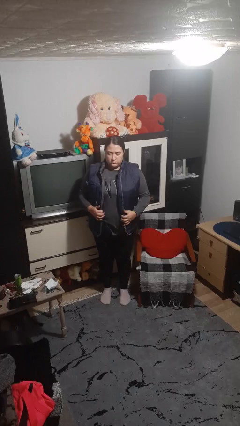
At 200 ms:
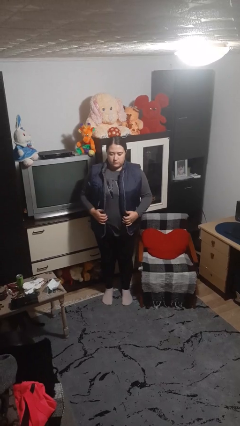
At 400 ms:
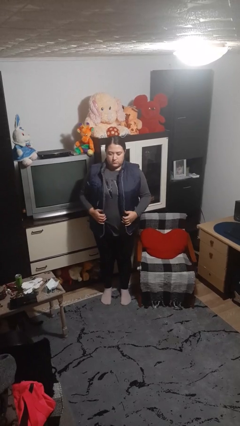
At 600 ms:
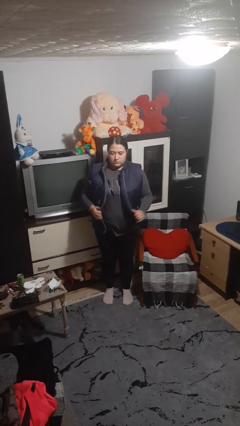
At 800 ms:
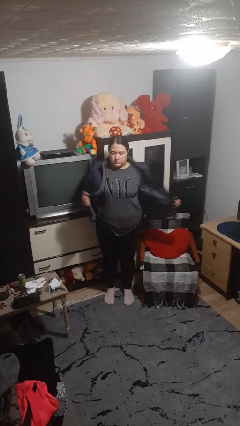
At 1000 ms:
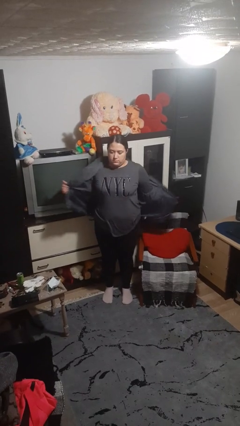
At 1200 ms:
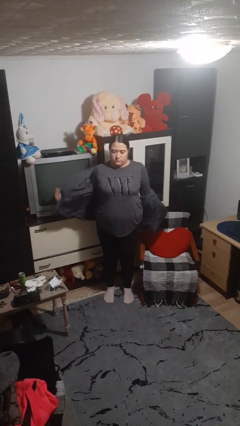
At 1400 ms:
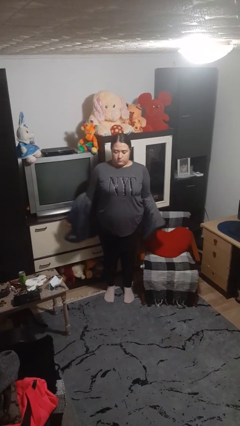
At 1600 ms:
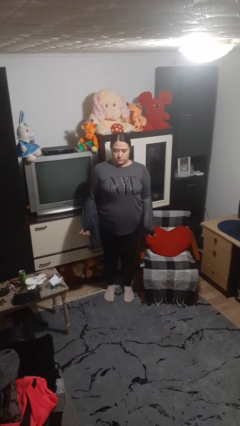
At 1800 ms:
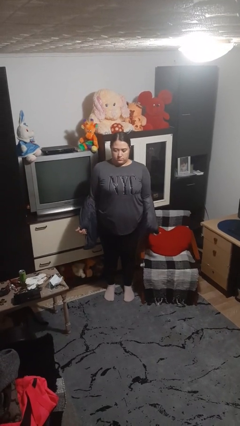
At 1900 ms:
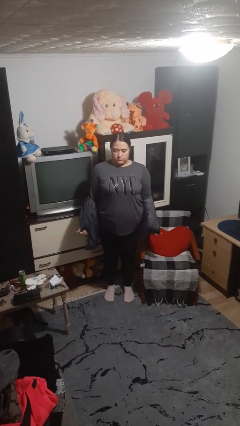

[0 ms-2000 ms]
person takes off jacket

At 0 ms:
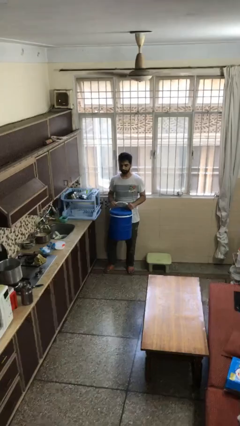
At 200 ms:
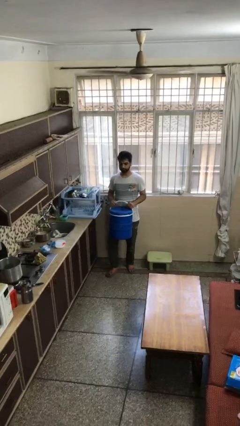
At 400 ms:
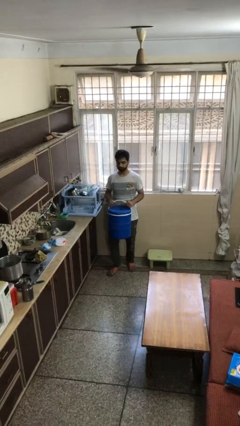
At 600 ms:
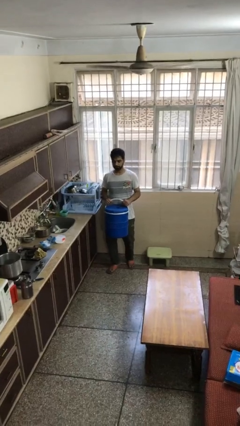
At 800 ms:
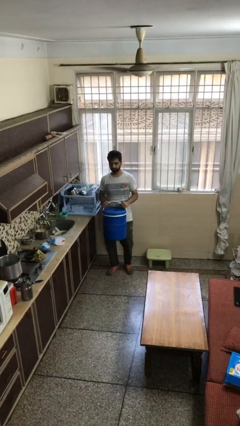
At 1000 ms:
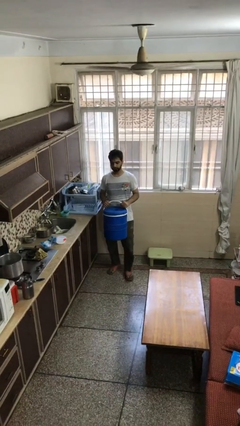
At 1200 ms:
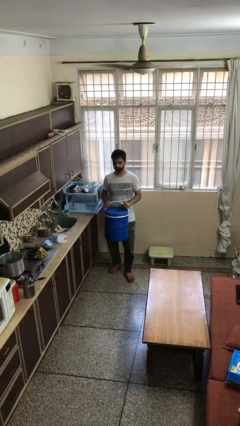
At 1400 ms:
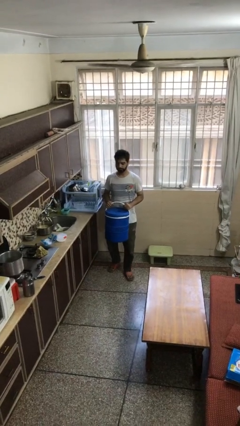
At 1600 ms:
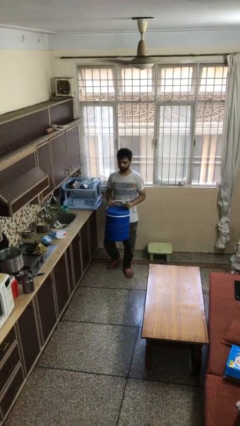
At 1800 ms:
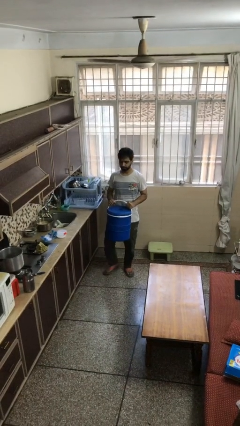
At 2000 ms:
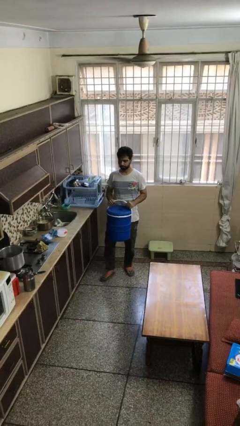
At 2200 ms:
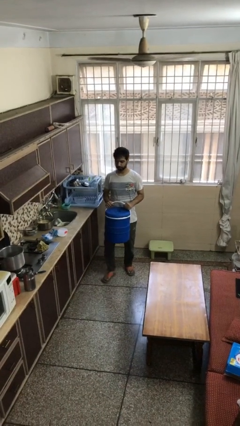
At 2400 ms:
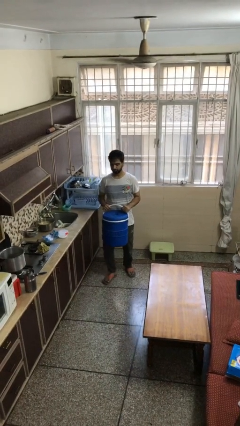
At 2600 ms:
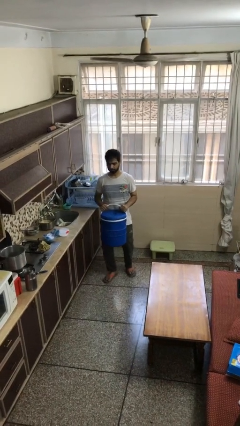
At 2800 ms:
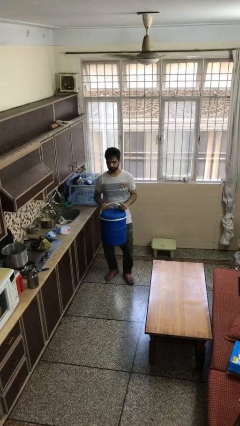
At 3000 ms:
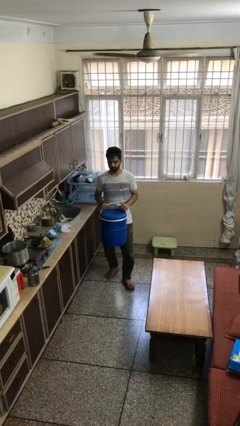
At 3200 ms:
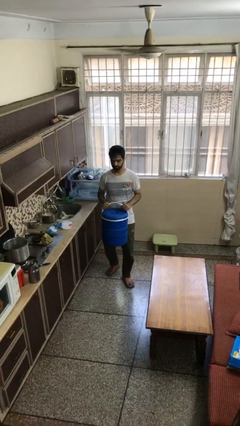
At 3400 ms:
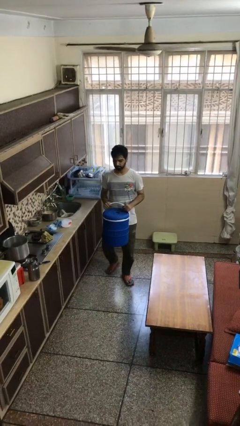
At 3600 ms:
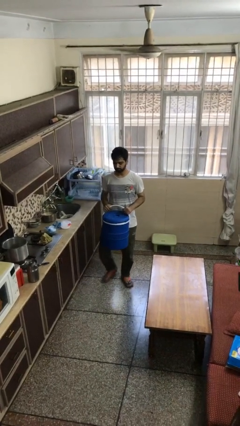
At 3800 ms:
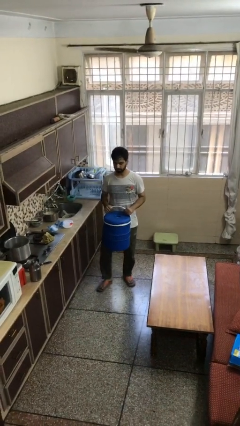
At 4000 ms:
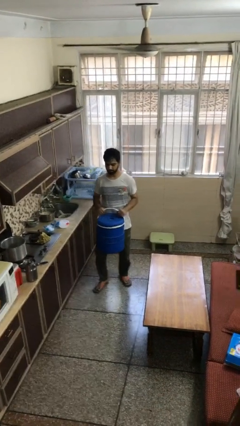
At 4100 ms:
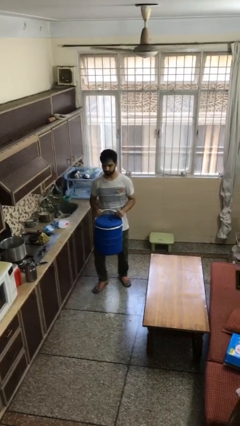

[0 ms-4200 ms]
person carries heavy object

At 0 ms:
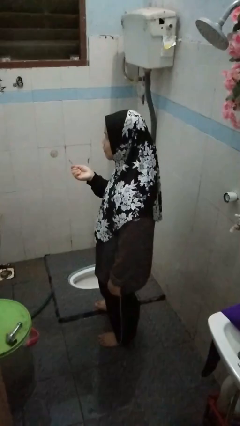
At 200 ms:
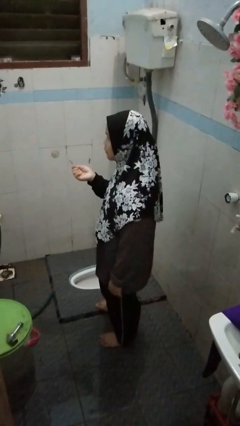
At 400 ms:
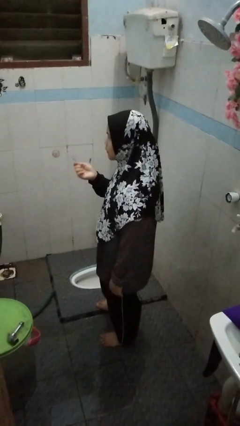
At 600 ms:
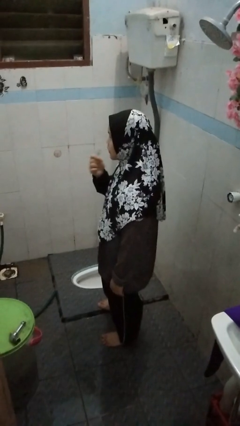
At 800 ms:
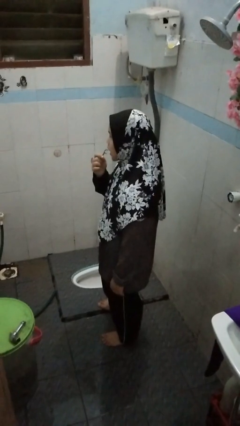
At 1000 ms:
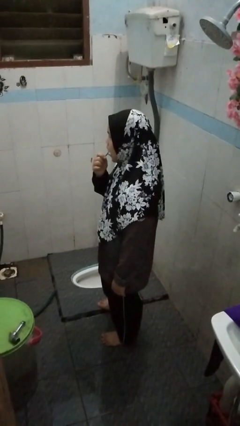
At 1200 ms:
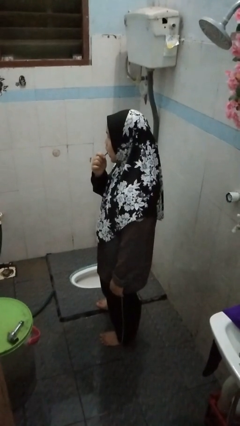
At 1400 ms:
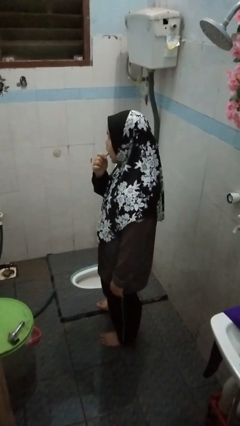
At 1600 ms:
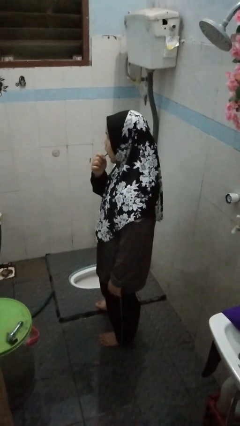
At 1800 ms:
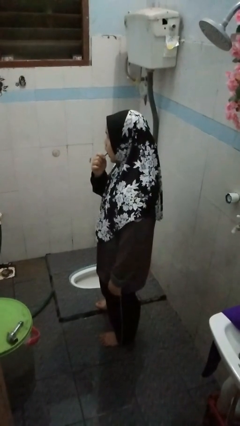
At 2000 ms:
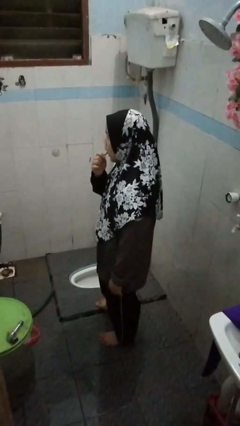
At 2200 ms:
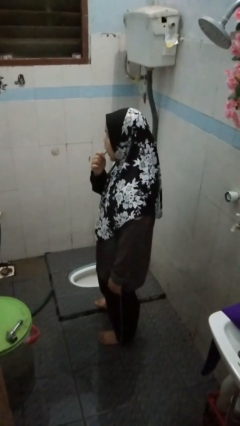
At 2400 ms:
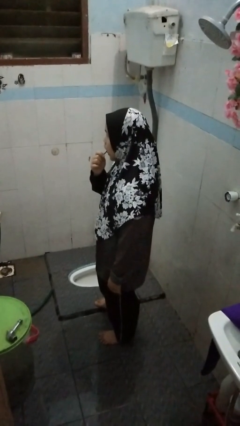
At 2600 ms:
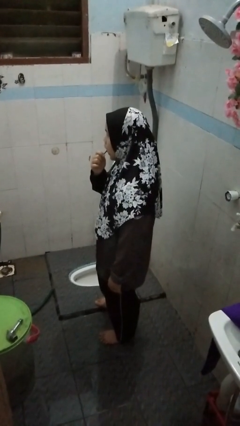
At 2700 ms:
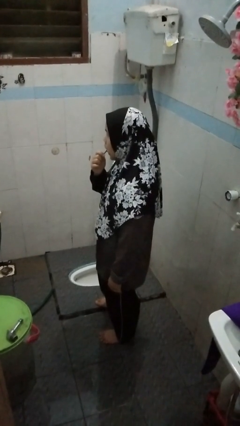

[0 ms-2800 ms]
person flosses

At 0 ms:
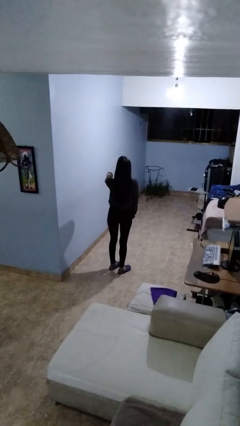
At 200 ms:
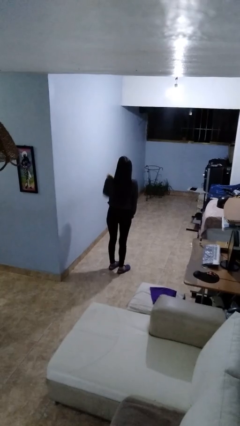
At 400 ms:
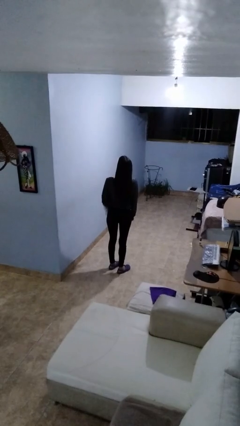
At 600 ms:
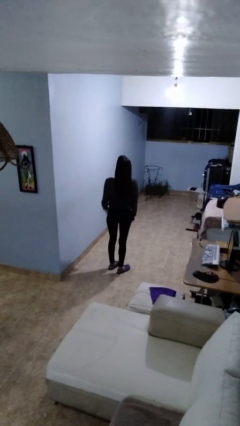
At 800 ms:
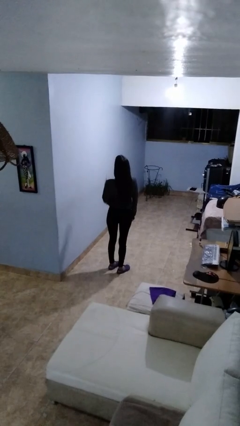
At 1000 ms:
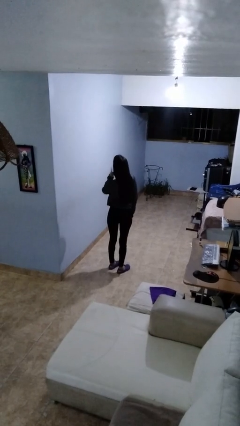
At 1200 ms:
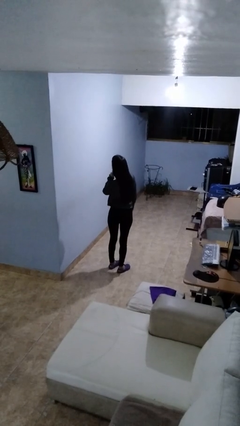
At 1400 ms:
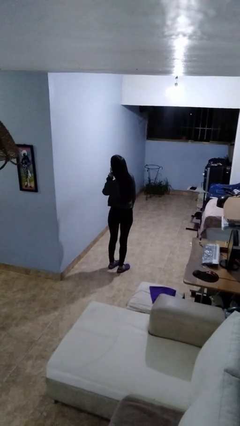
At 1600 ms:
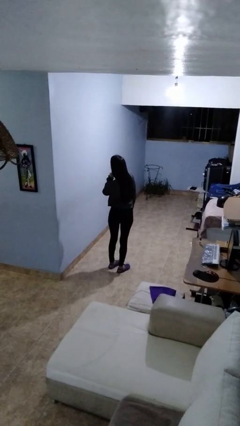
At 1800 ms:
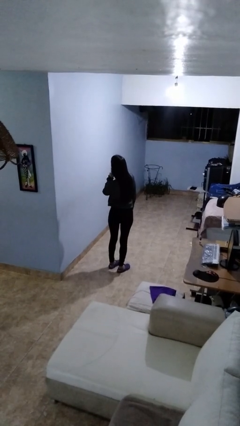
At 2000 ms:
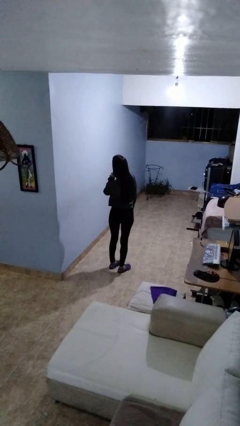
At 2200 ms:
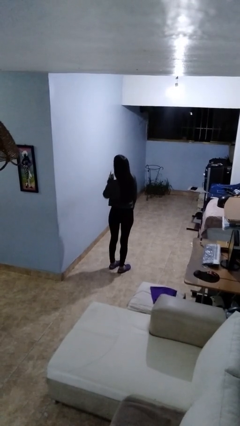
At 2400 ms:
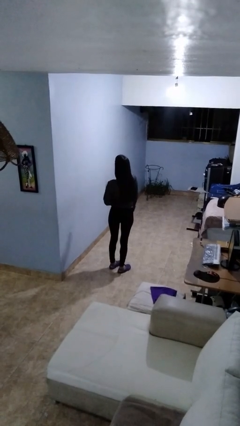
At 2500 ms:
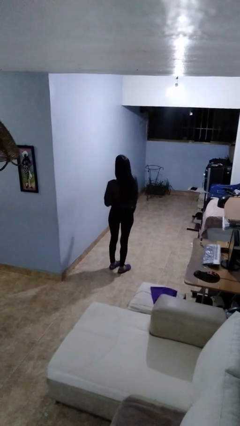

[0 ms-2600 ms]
person gestures listen closely

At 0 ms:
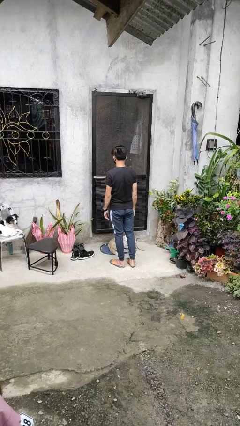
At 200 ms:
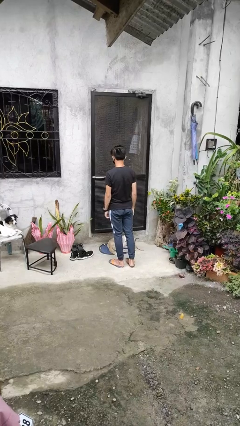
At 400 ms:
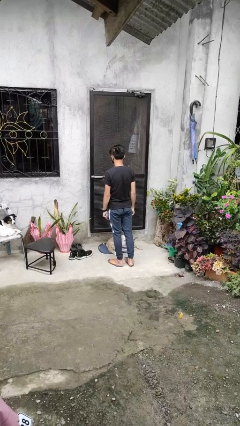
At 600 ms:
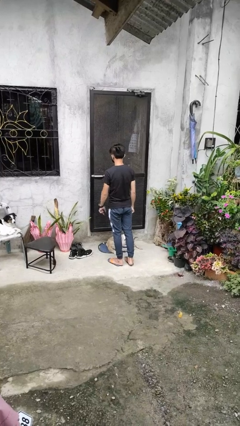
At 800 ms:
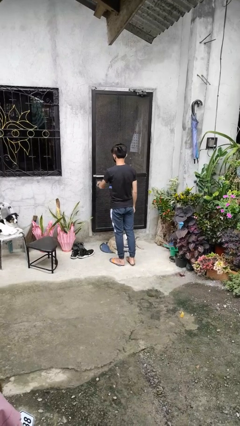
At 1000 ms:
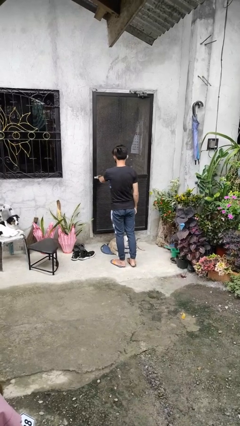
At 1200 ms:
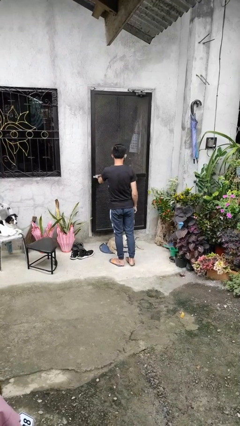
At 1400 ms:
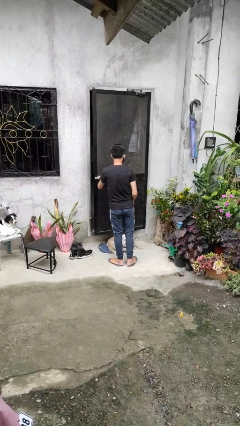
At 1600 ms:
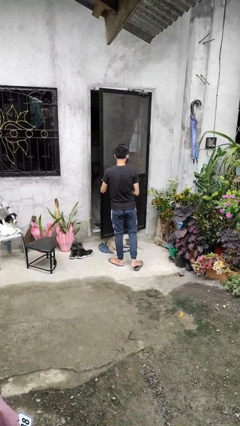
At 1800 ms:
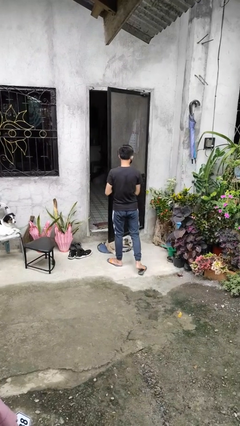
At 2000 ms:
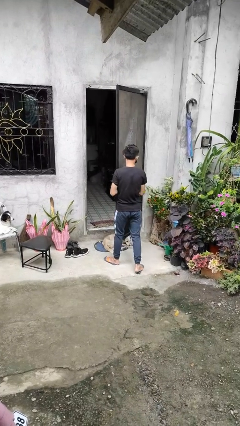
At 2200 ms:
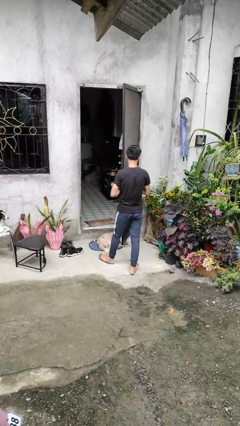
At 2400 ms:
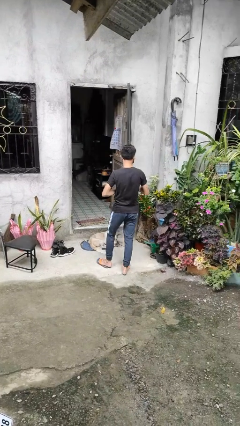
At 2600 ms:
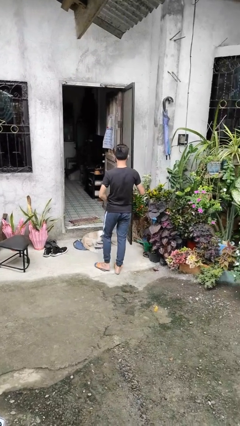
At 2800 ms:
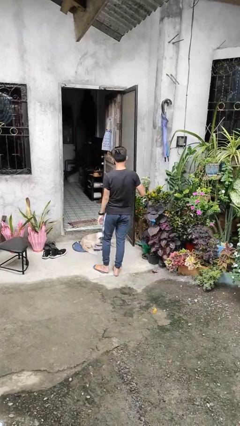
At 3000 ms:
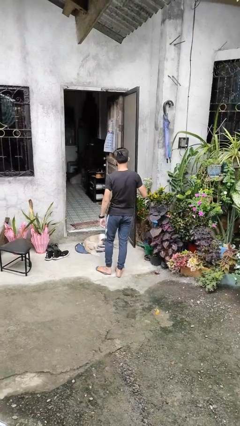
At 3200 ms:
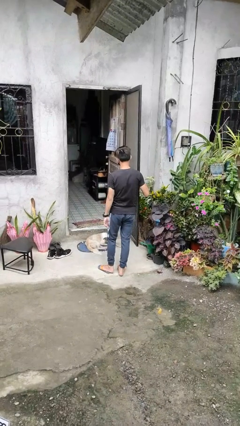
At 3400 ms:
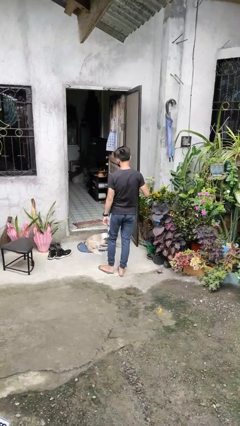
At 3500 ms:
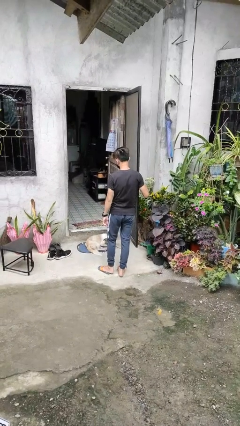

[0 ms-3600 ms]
person opens facility door

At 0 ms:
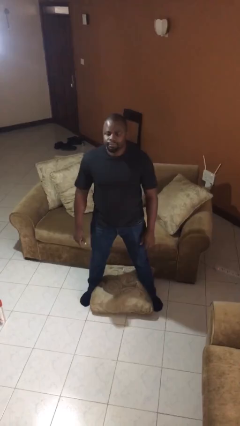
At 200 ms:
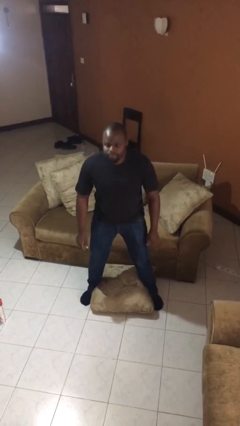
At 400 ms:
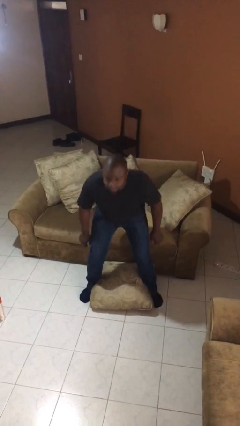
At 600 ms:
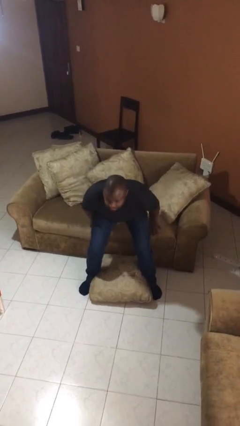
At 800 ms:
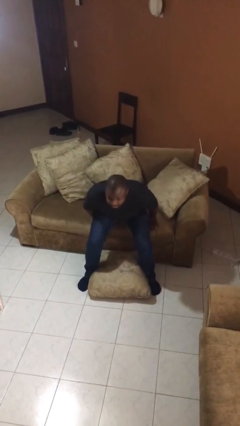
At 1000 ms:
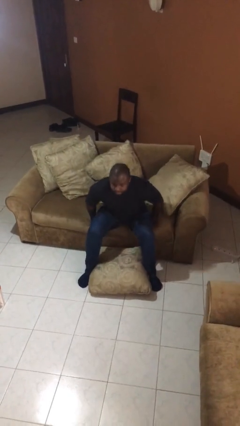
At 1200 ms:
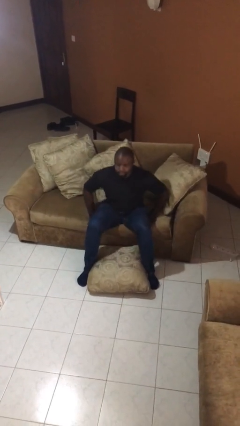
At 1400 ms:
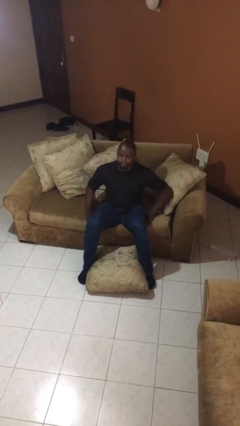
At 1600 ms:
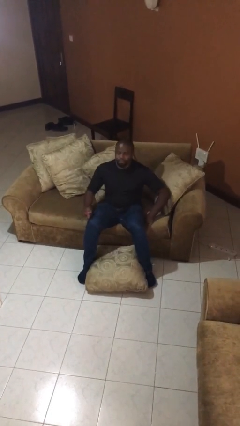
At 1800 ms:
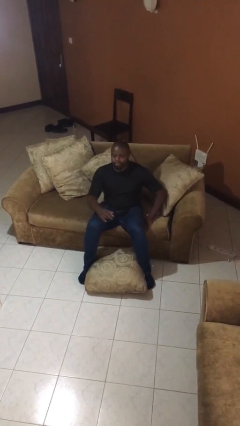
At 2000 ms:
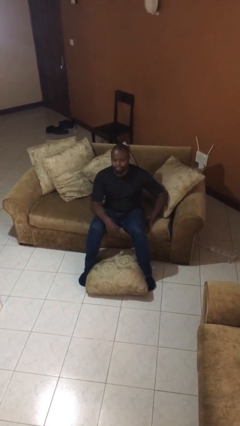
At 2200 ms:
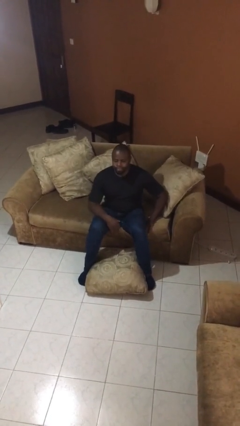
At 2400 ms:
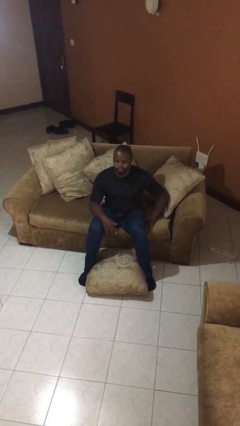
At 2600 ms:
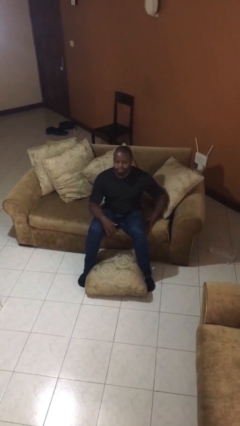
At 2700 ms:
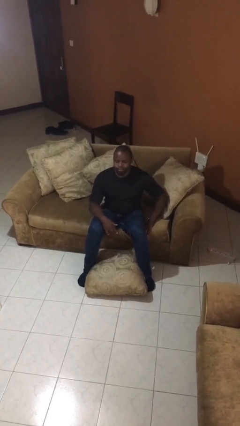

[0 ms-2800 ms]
person sits down
